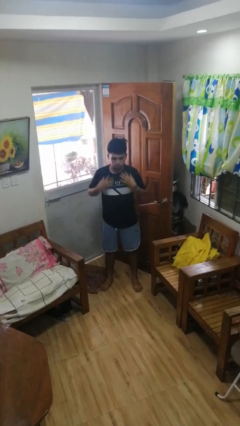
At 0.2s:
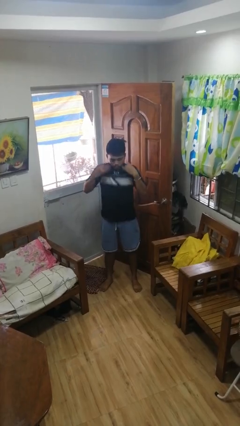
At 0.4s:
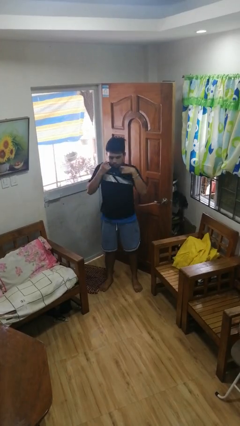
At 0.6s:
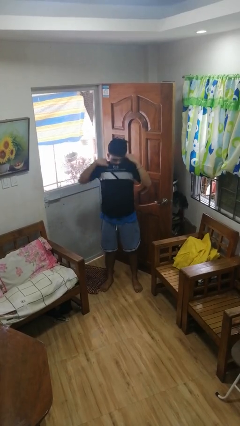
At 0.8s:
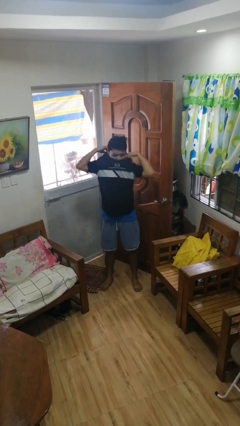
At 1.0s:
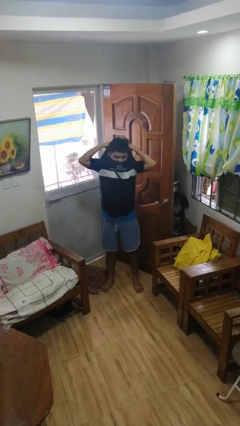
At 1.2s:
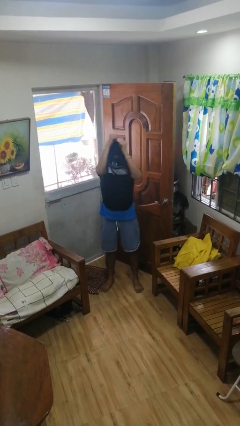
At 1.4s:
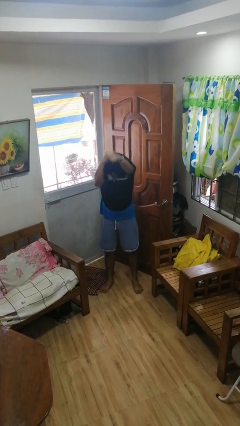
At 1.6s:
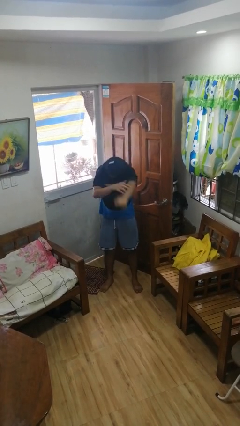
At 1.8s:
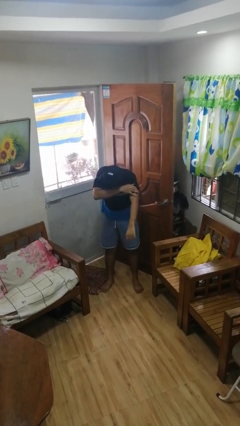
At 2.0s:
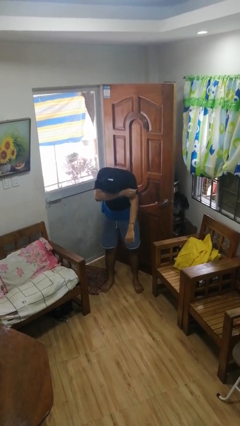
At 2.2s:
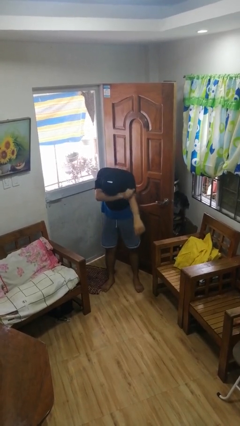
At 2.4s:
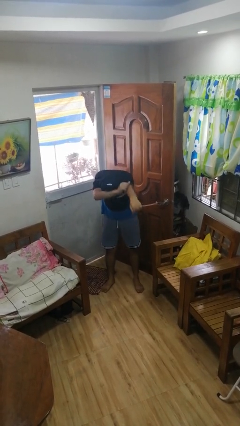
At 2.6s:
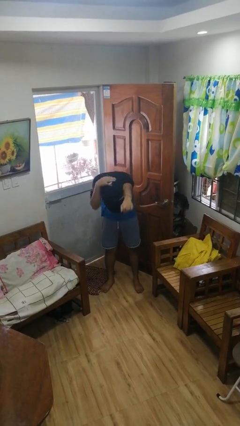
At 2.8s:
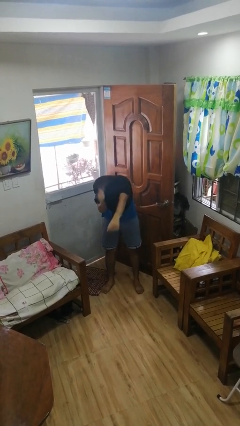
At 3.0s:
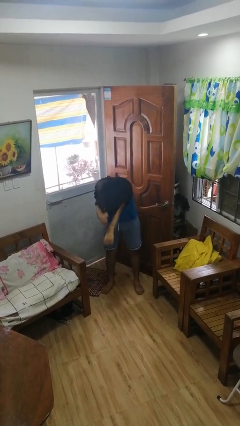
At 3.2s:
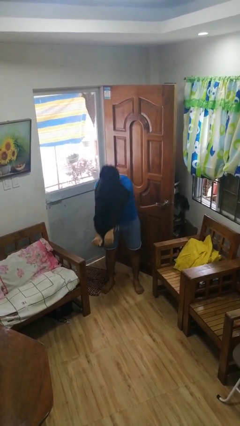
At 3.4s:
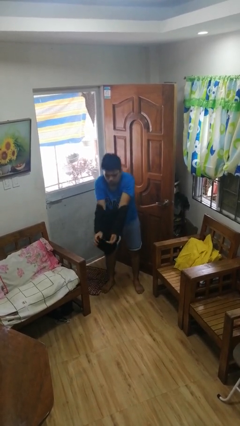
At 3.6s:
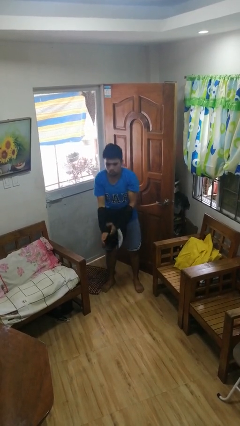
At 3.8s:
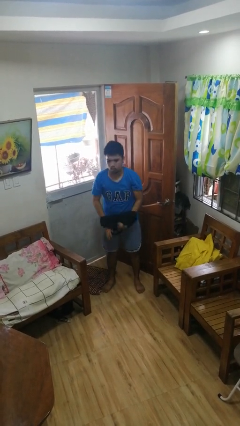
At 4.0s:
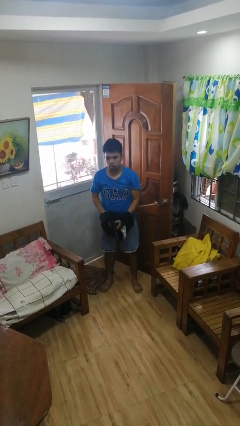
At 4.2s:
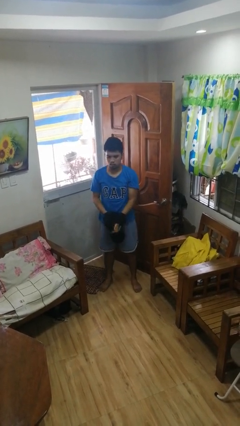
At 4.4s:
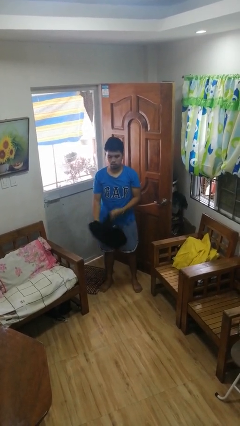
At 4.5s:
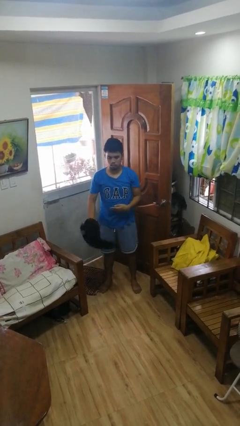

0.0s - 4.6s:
person takes off shirt

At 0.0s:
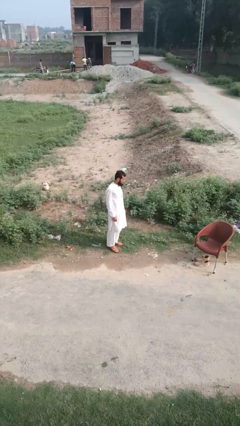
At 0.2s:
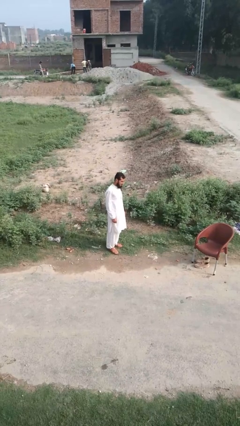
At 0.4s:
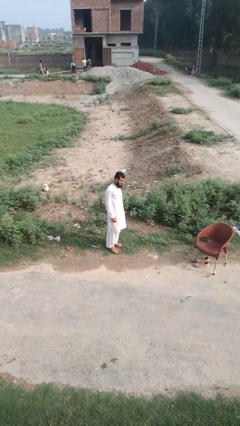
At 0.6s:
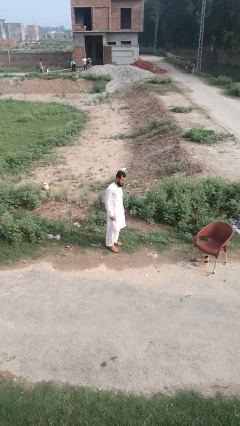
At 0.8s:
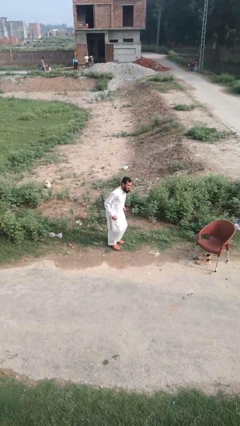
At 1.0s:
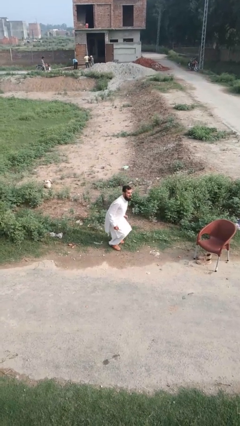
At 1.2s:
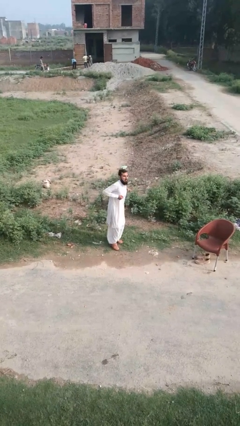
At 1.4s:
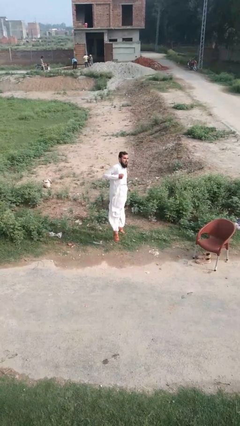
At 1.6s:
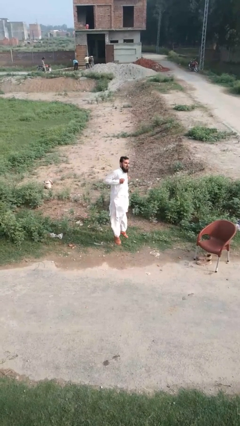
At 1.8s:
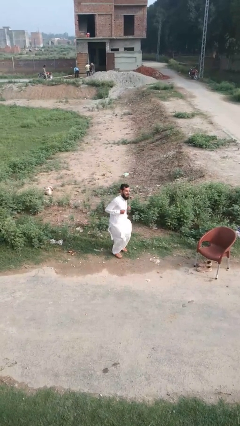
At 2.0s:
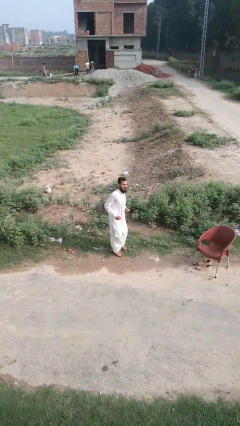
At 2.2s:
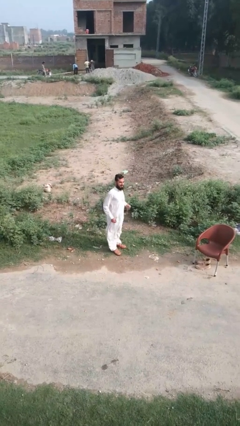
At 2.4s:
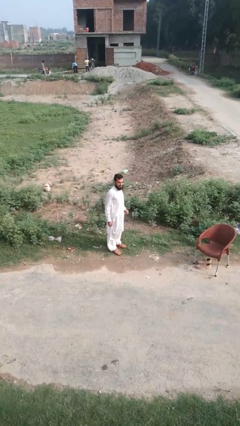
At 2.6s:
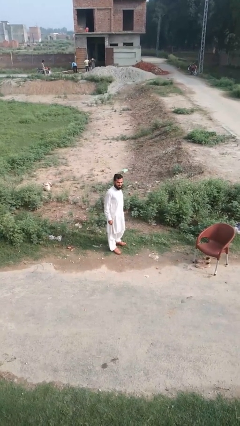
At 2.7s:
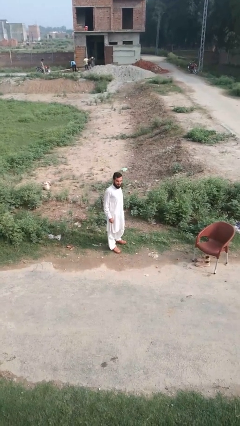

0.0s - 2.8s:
person jumps

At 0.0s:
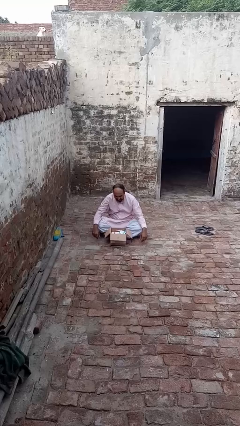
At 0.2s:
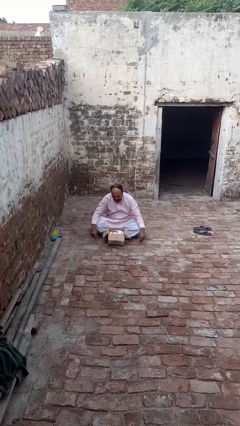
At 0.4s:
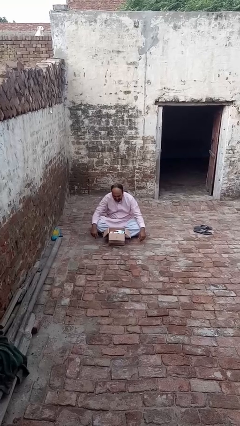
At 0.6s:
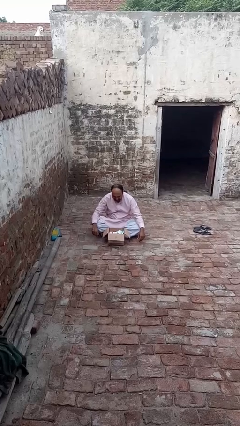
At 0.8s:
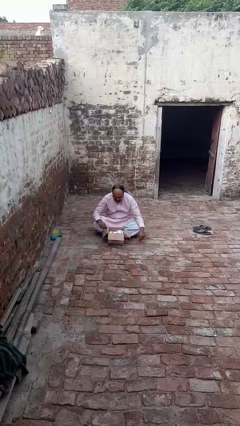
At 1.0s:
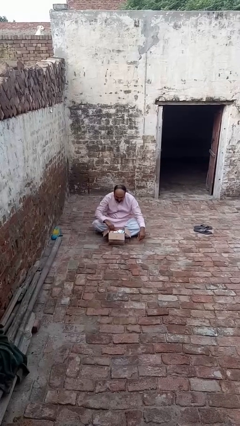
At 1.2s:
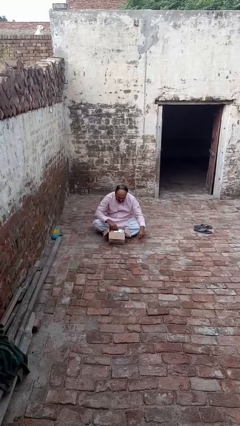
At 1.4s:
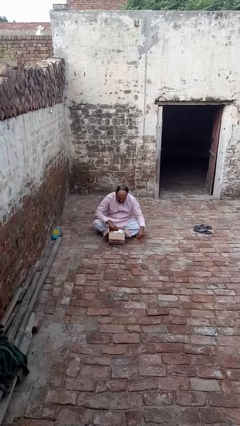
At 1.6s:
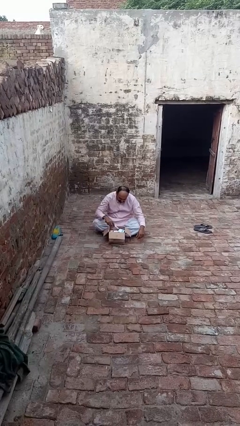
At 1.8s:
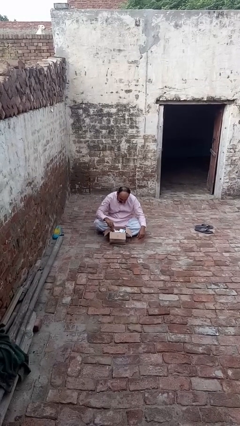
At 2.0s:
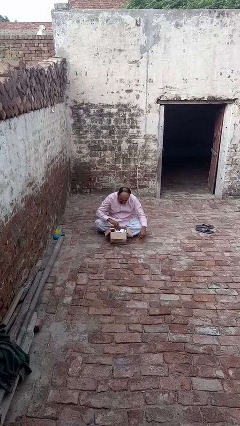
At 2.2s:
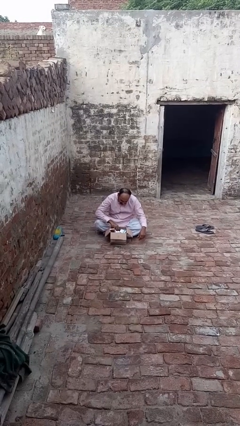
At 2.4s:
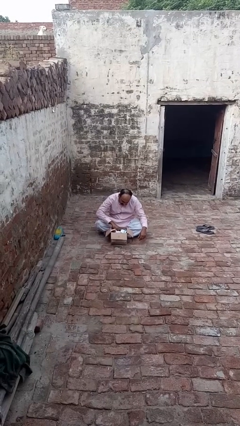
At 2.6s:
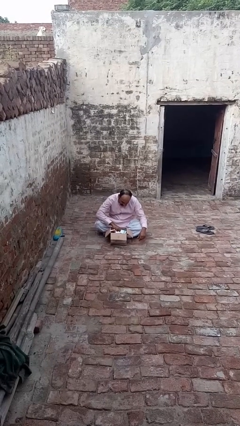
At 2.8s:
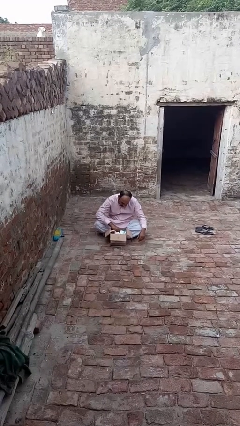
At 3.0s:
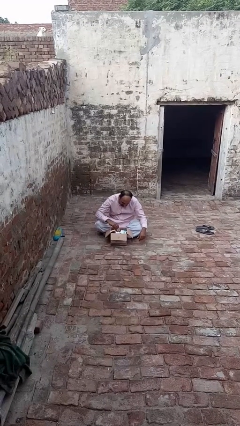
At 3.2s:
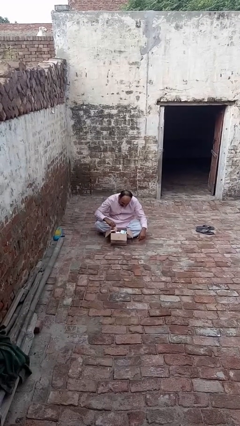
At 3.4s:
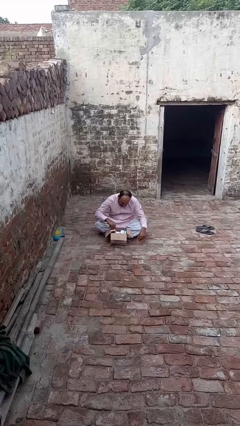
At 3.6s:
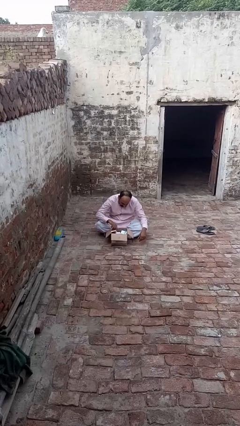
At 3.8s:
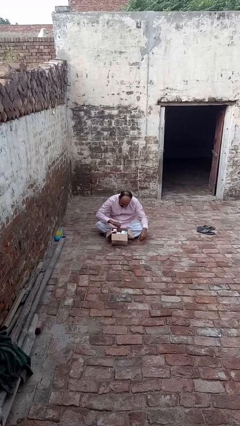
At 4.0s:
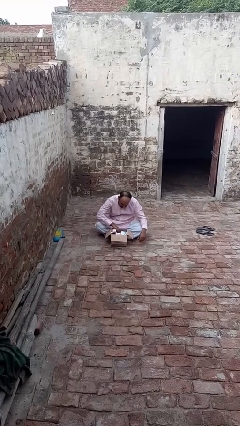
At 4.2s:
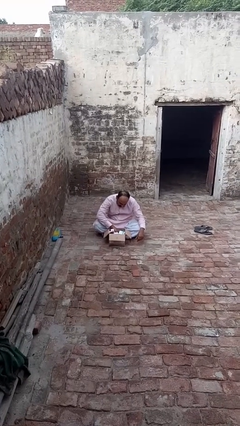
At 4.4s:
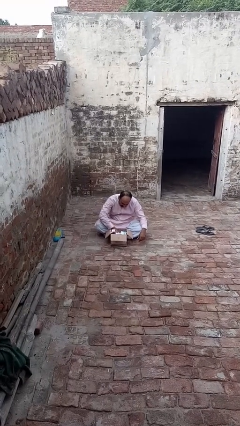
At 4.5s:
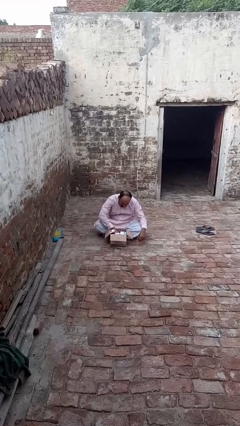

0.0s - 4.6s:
person searches in box

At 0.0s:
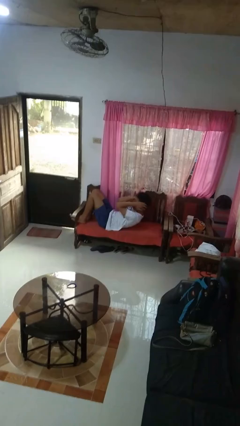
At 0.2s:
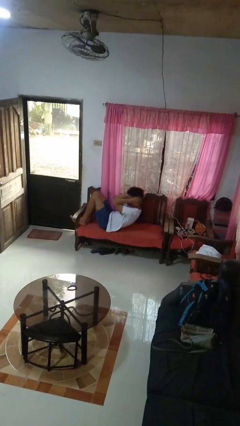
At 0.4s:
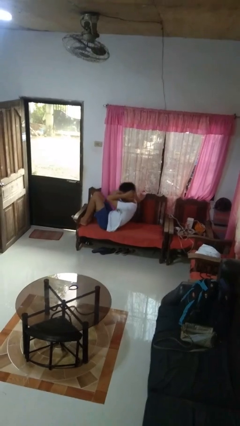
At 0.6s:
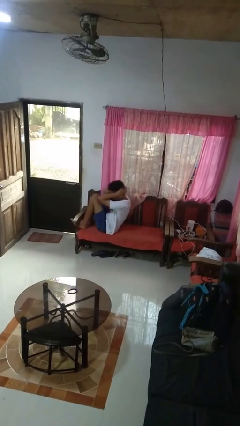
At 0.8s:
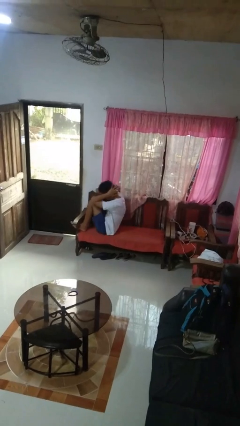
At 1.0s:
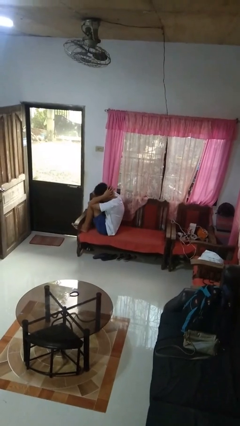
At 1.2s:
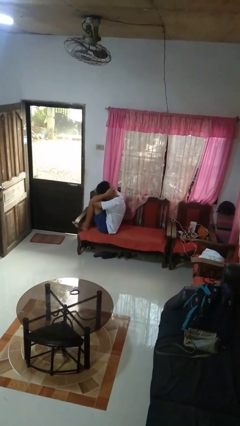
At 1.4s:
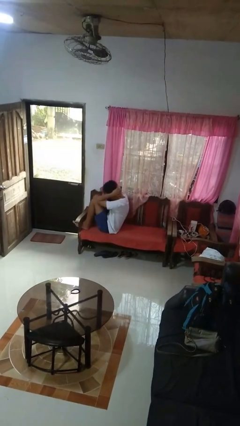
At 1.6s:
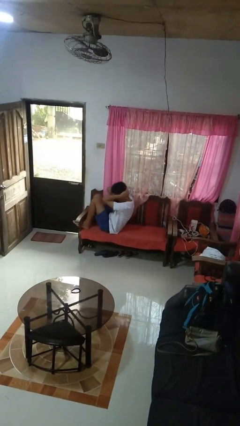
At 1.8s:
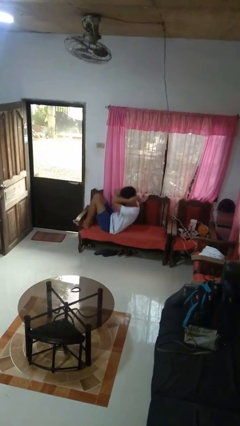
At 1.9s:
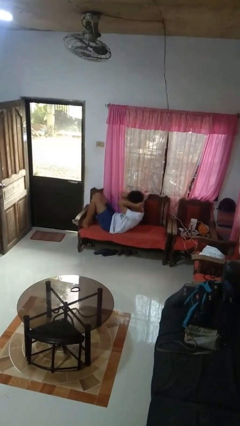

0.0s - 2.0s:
person exercises with situp

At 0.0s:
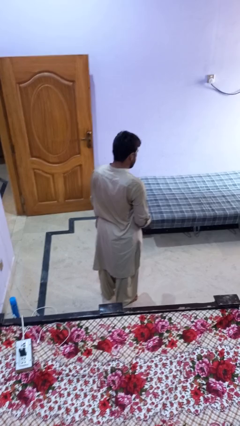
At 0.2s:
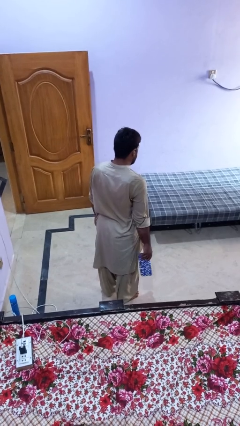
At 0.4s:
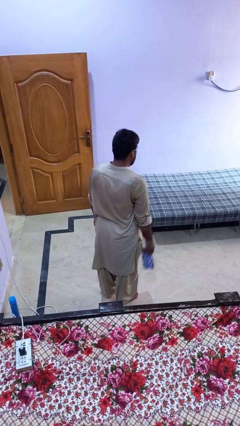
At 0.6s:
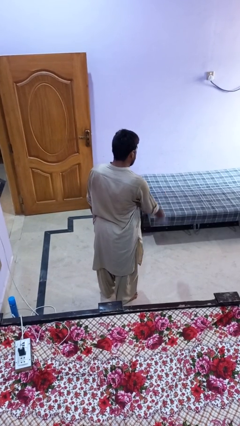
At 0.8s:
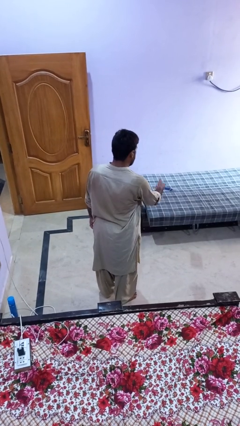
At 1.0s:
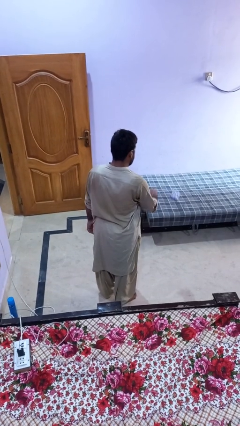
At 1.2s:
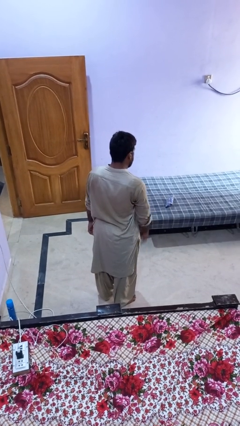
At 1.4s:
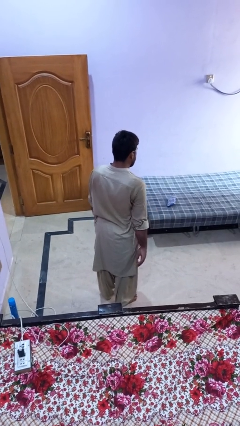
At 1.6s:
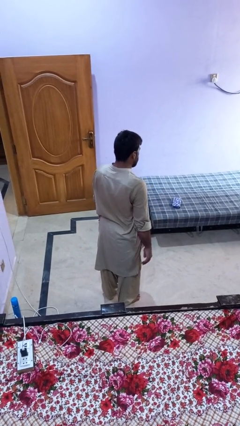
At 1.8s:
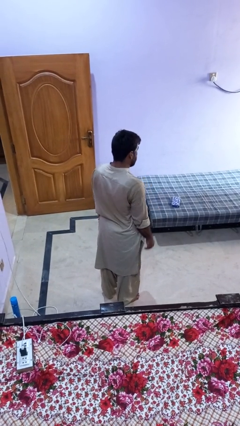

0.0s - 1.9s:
person throws object on bed

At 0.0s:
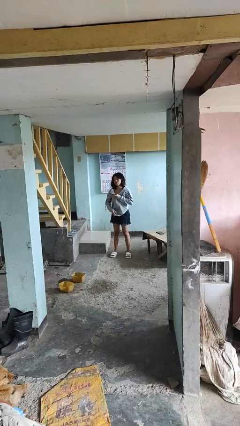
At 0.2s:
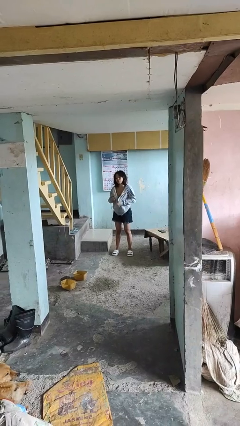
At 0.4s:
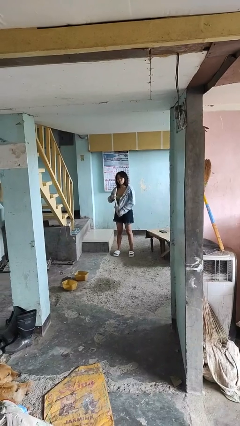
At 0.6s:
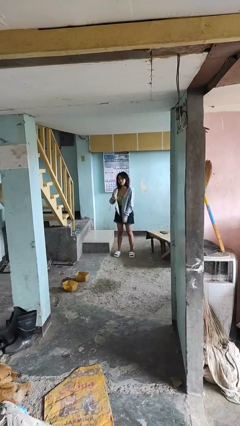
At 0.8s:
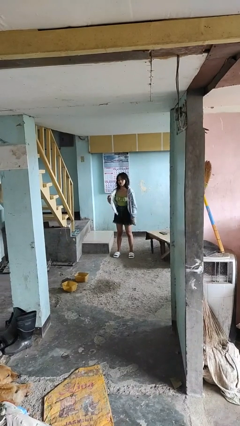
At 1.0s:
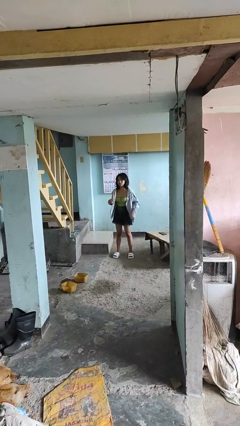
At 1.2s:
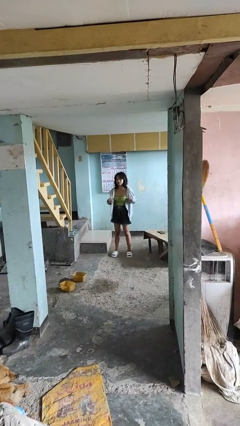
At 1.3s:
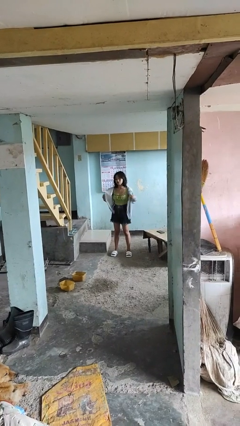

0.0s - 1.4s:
person unzips jacket
